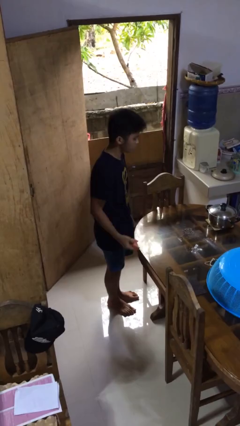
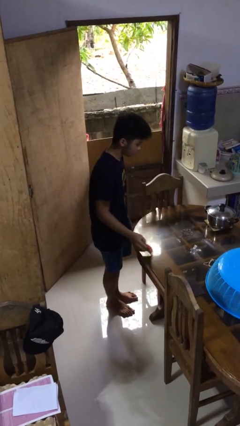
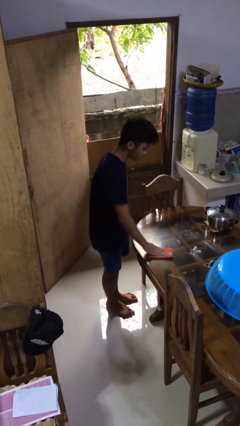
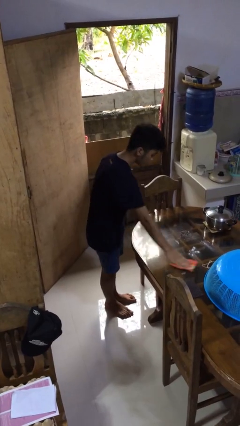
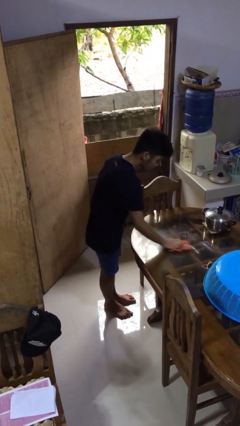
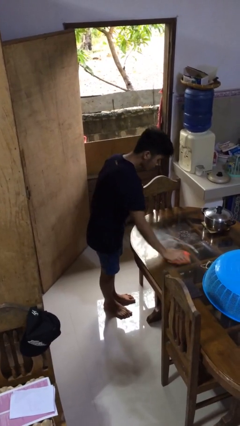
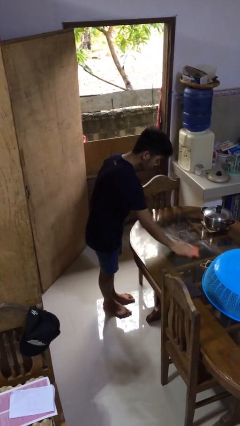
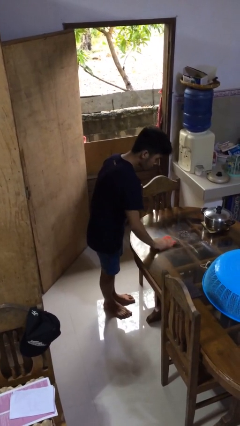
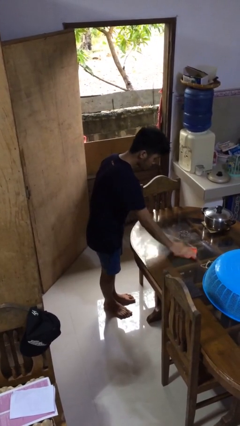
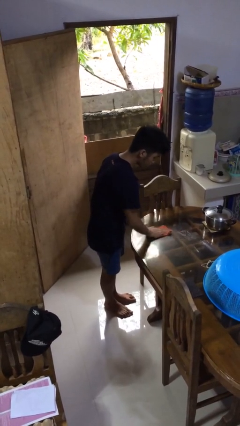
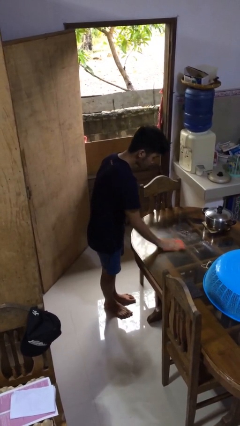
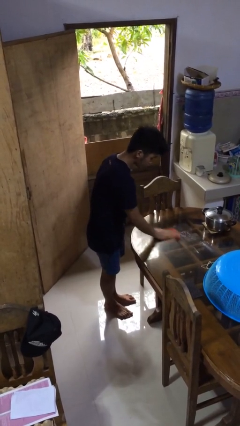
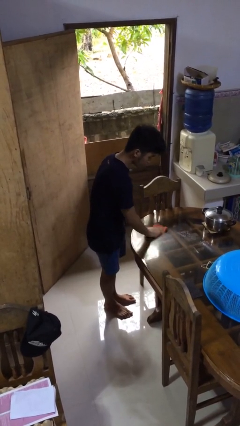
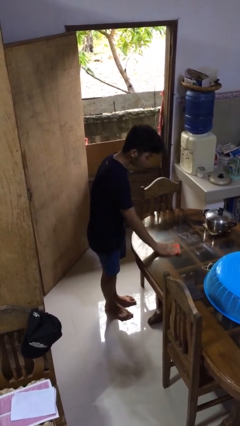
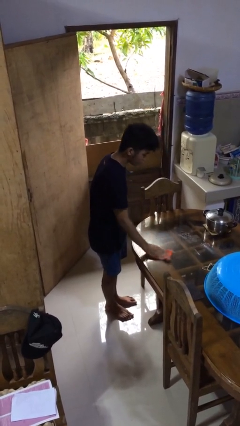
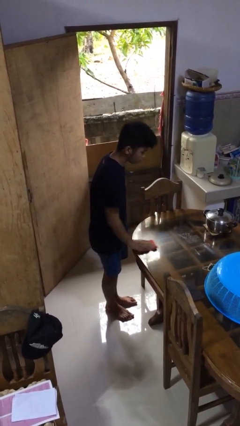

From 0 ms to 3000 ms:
person cleans table with rag

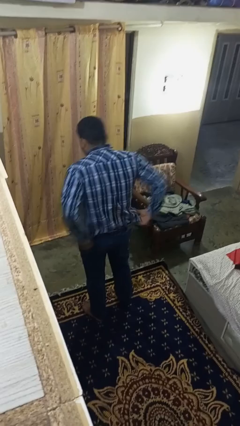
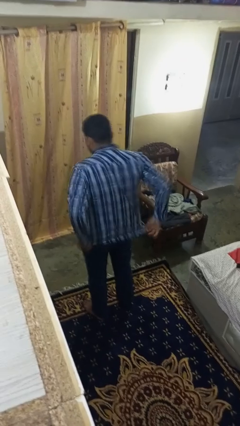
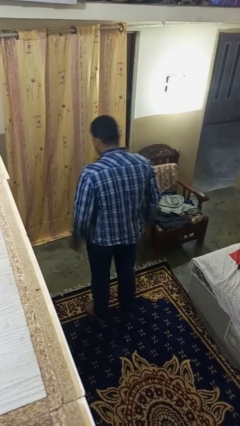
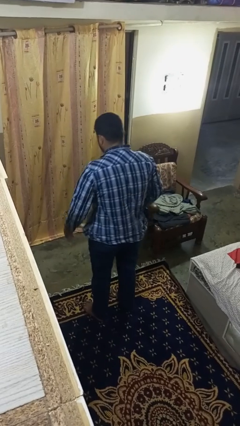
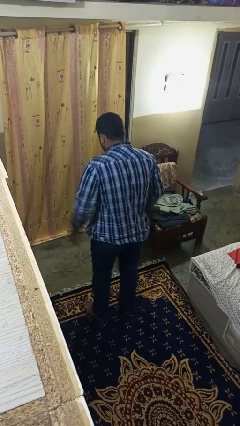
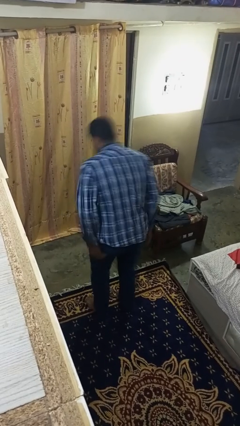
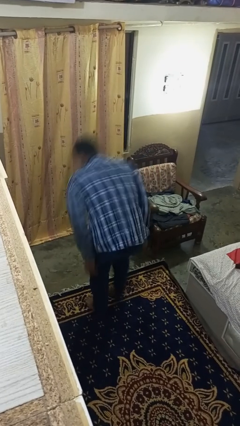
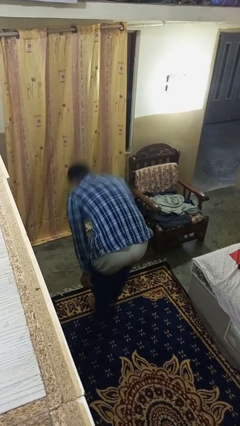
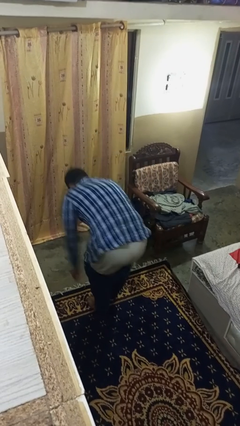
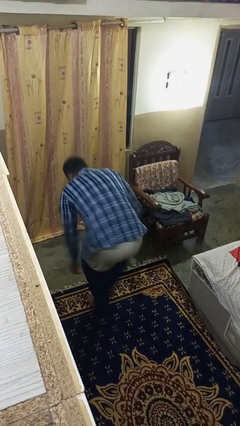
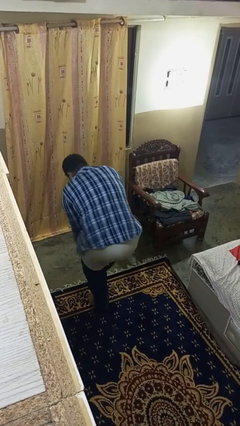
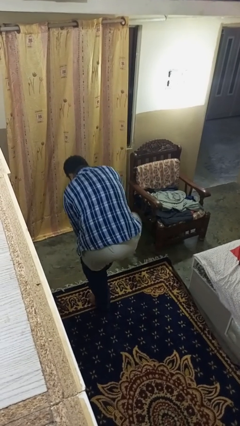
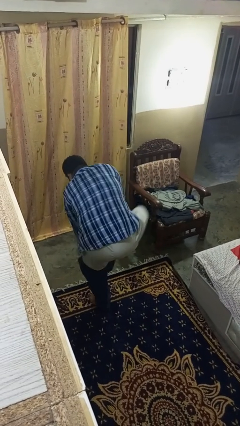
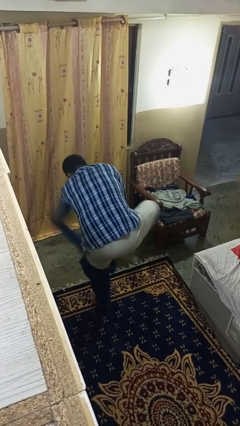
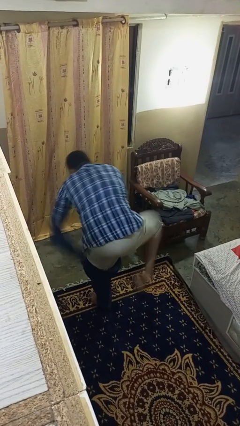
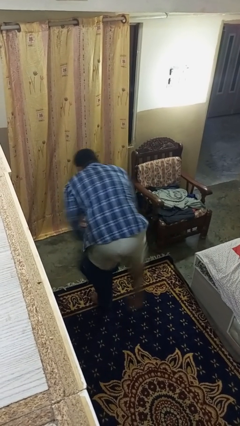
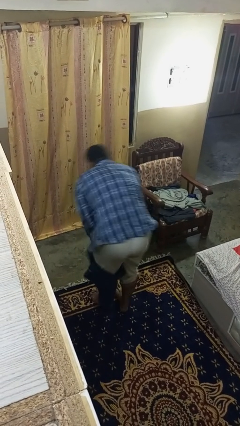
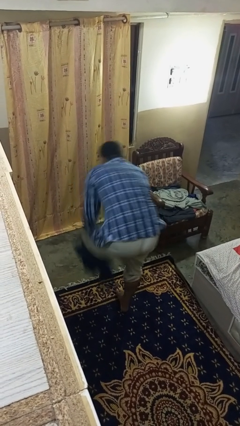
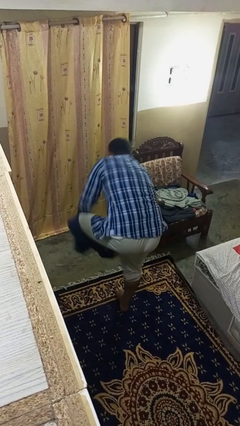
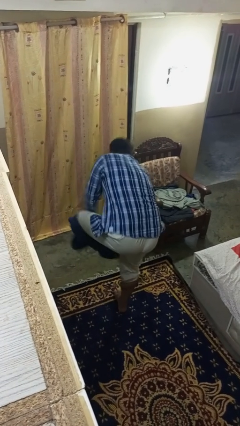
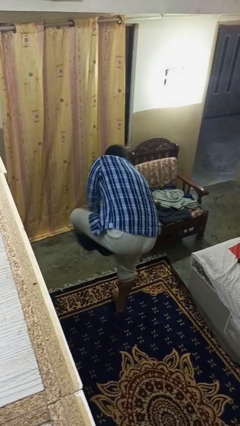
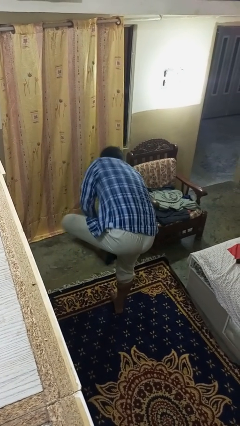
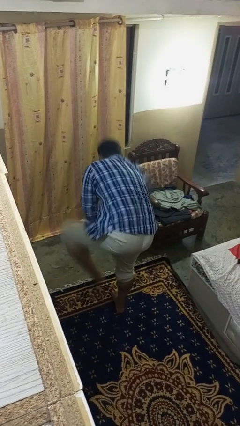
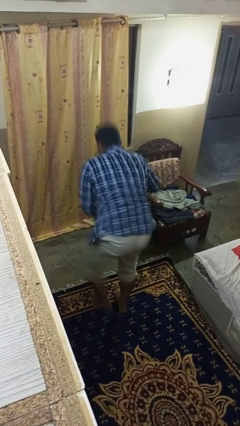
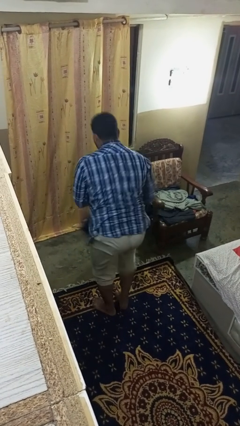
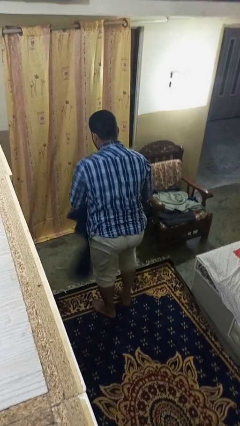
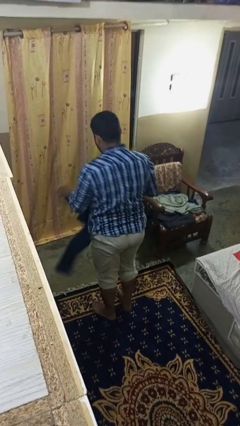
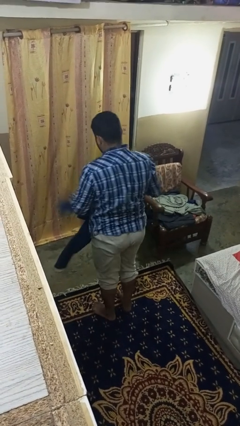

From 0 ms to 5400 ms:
person takes off pants

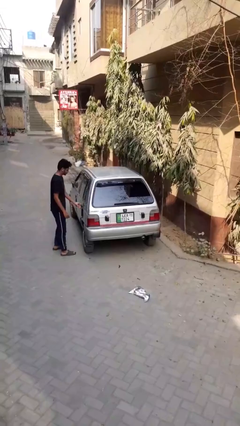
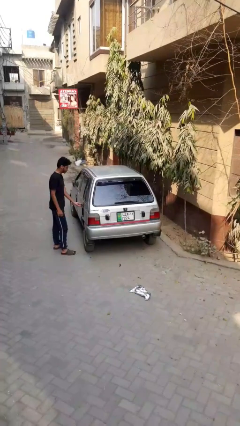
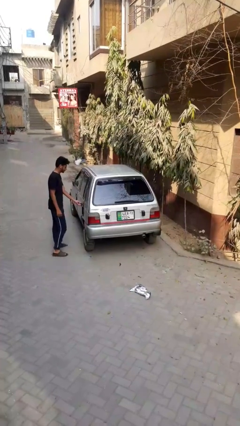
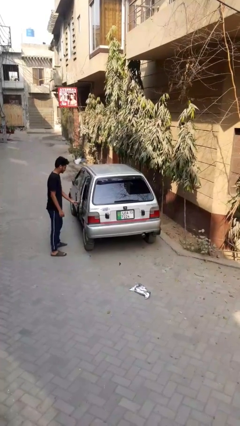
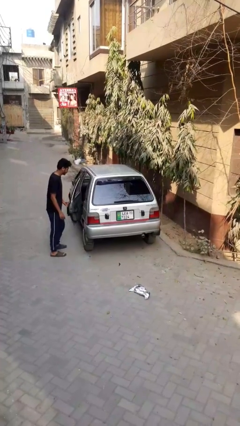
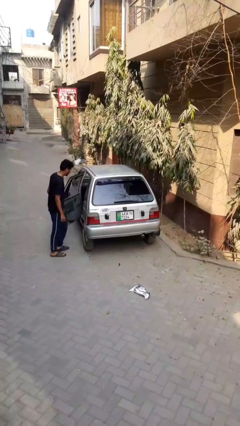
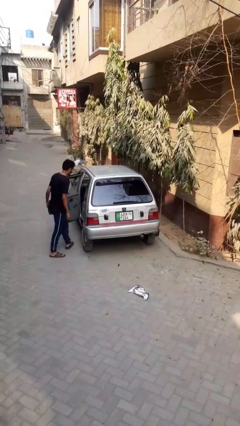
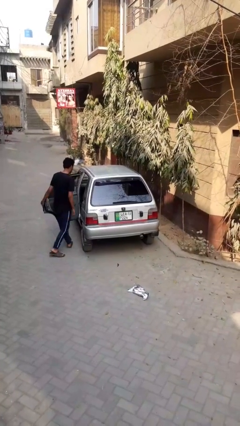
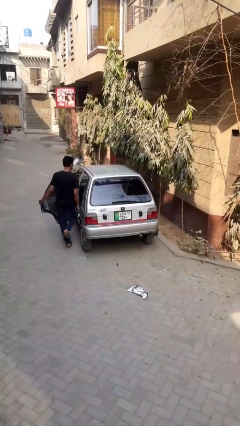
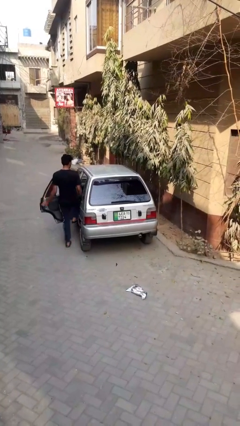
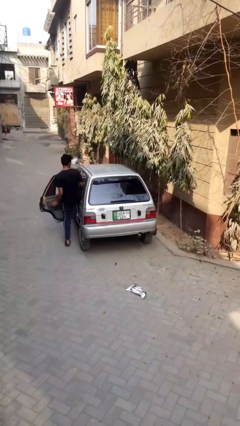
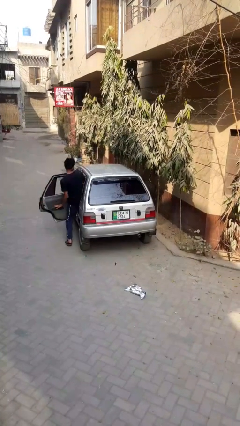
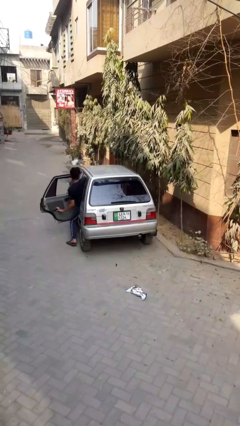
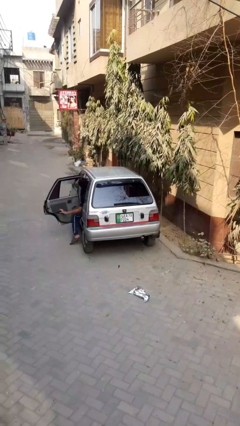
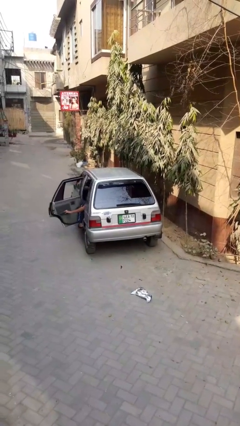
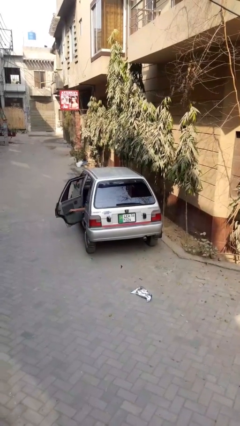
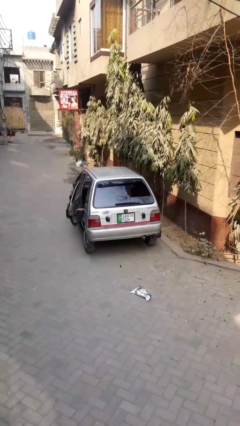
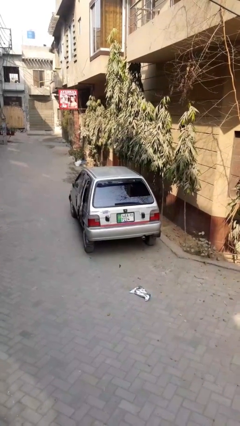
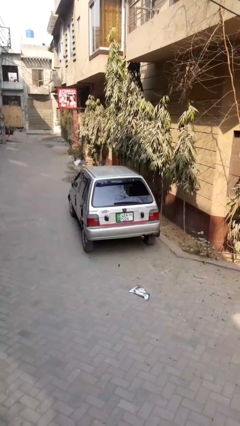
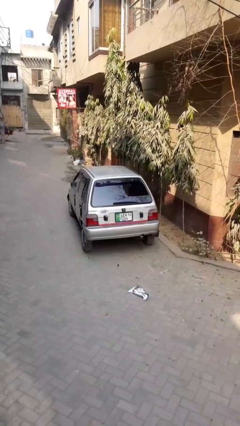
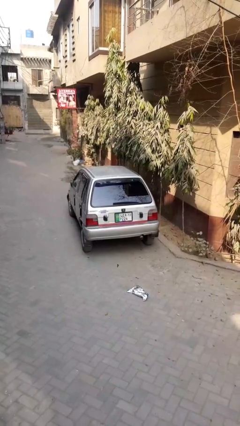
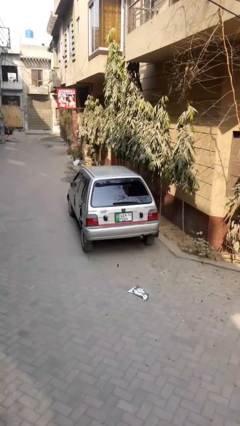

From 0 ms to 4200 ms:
car picks up person

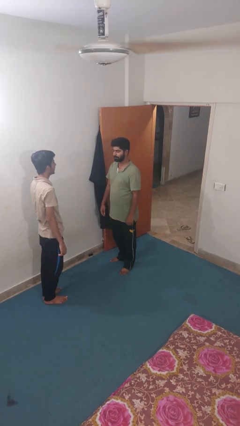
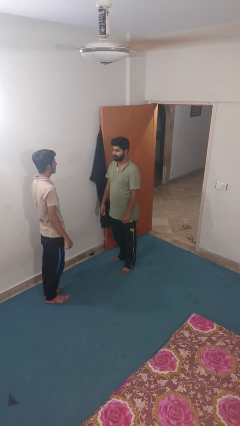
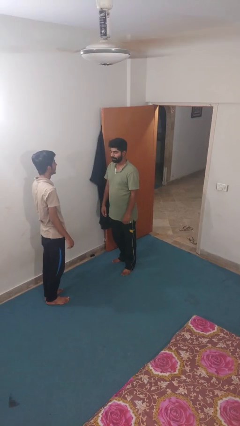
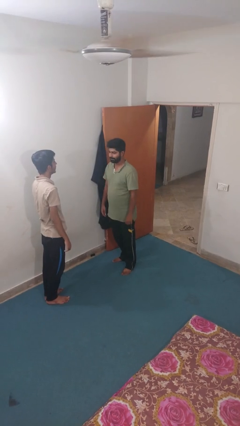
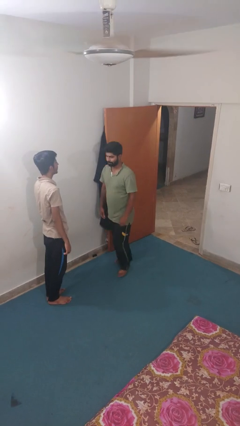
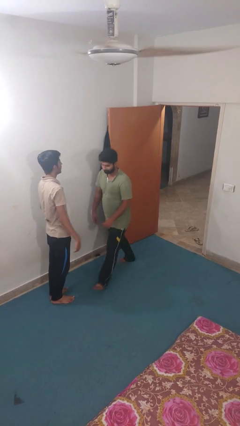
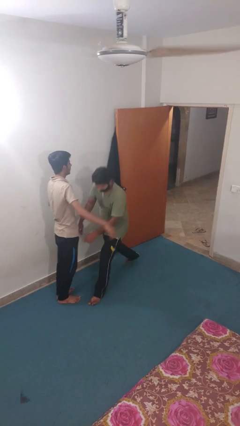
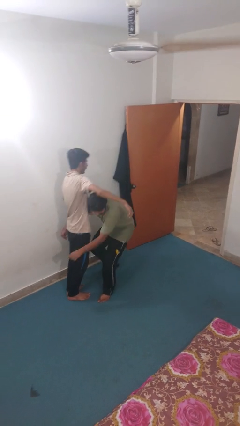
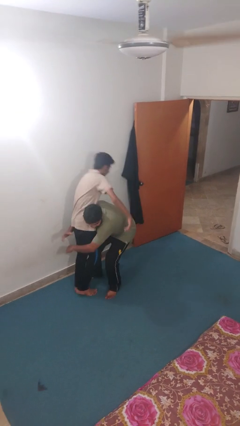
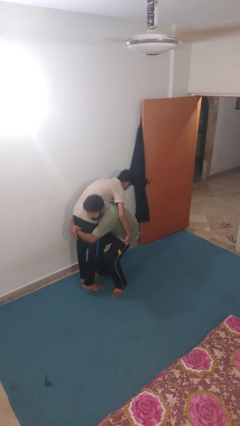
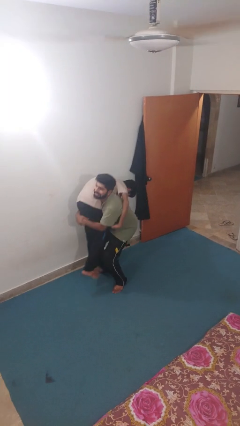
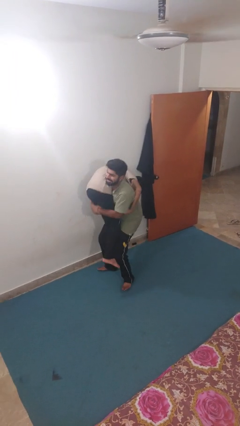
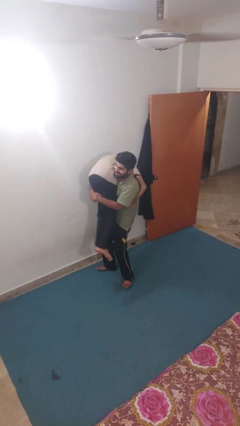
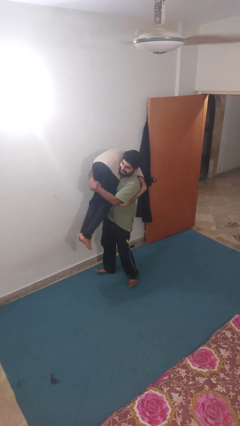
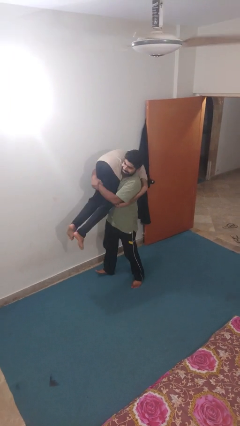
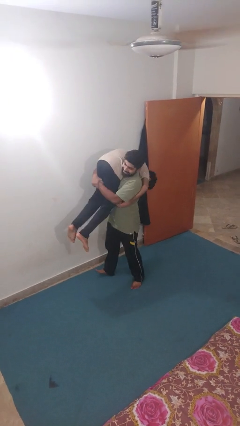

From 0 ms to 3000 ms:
person carries person over shoulder

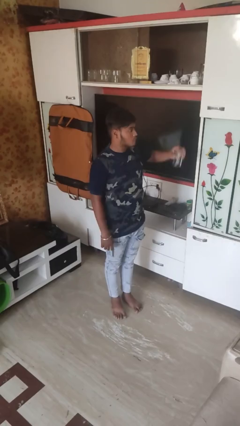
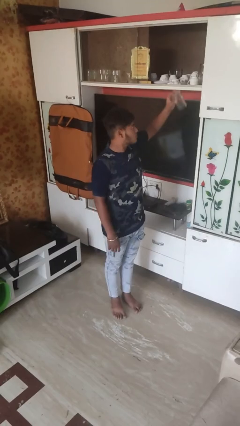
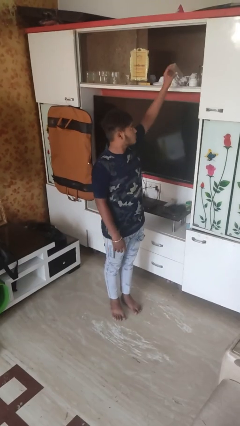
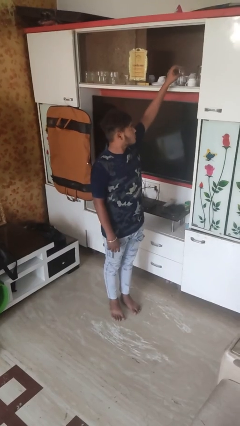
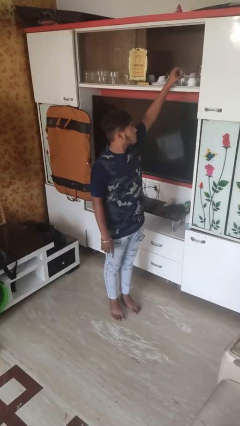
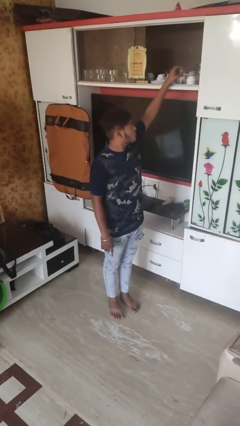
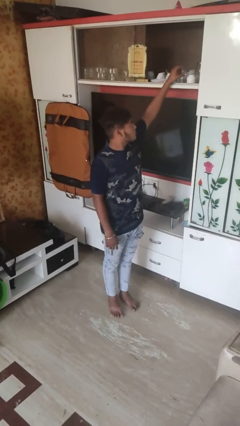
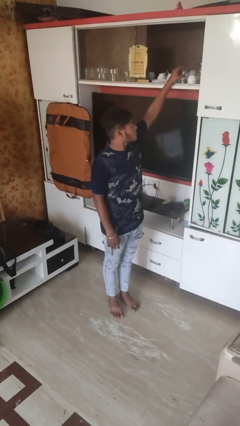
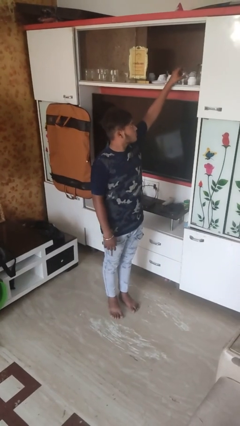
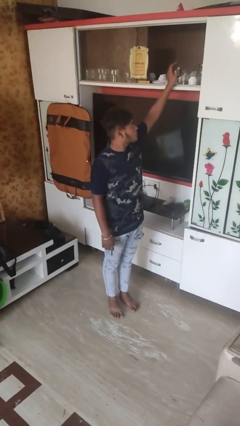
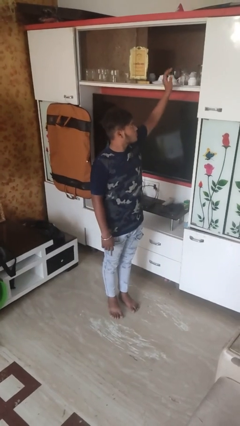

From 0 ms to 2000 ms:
person puts object in cabinet
